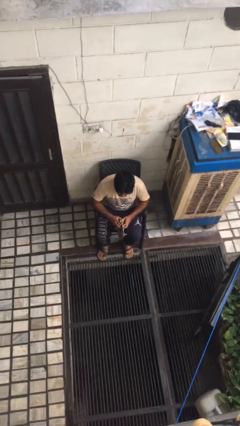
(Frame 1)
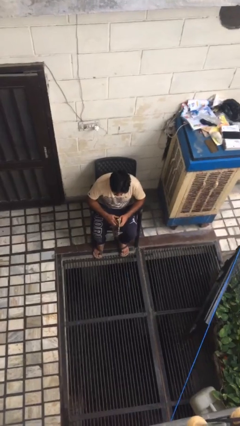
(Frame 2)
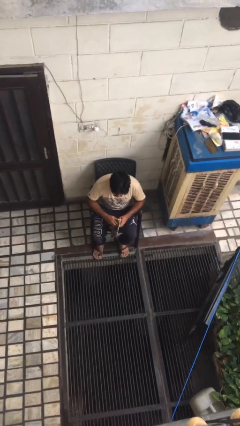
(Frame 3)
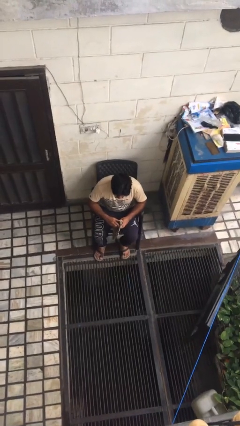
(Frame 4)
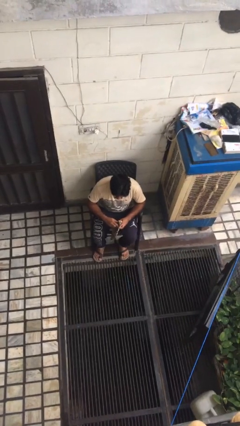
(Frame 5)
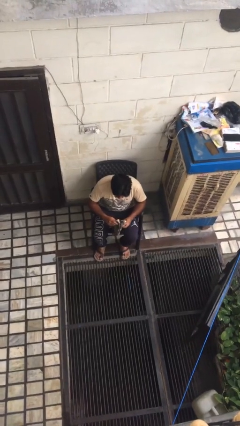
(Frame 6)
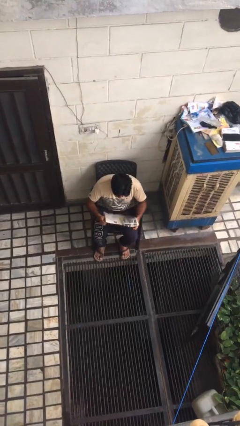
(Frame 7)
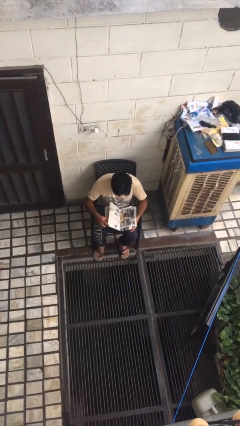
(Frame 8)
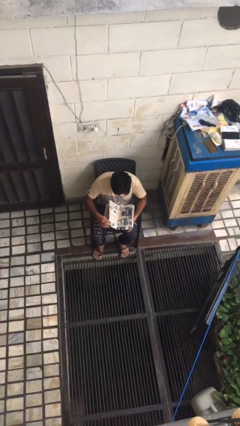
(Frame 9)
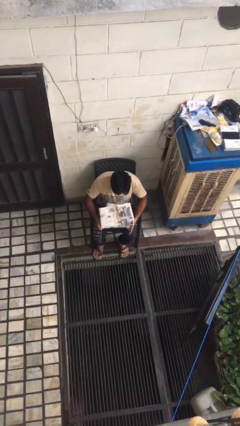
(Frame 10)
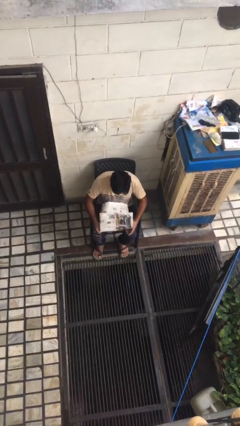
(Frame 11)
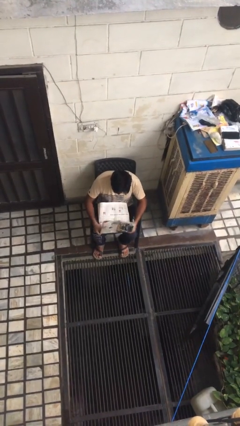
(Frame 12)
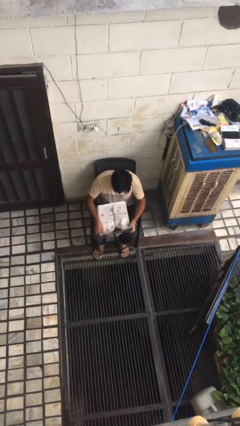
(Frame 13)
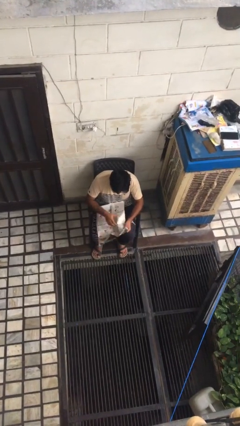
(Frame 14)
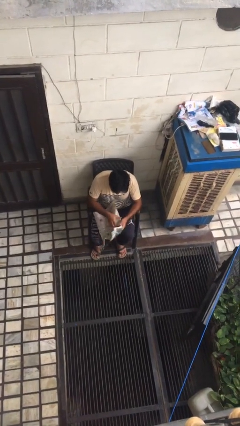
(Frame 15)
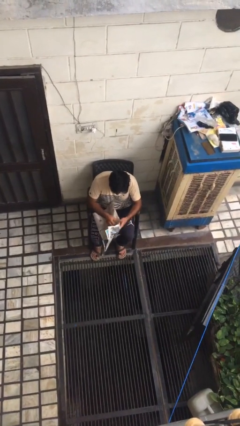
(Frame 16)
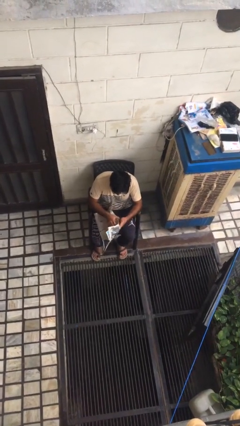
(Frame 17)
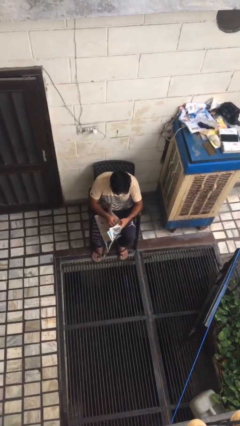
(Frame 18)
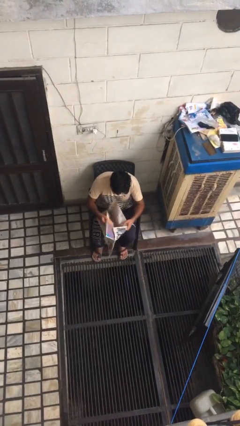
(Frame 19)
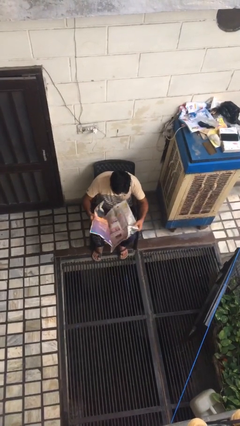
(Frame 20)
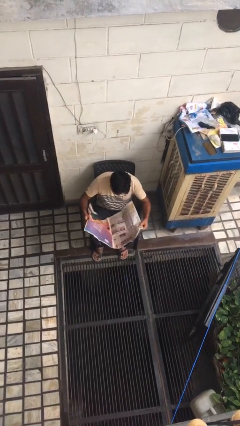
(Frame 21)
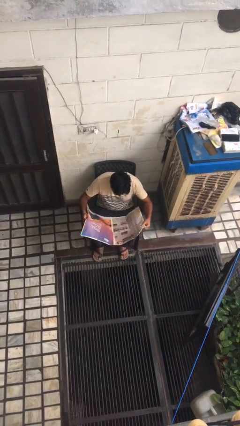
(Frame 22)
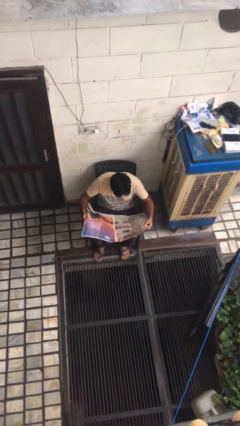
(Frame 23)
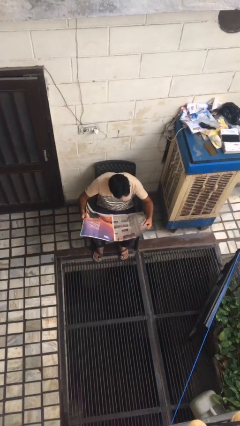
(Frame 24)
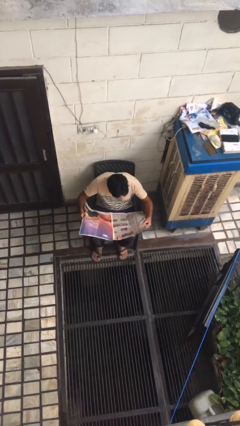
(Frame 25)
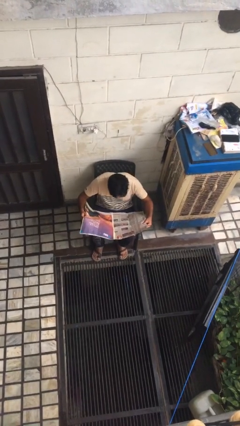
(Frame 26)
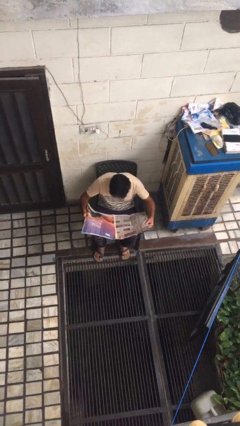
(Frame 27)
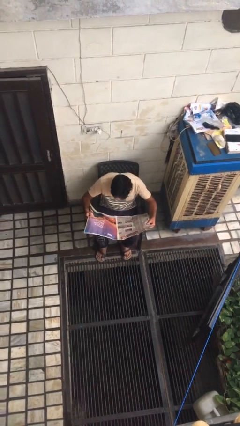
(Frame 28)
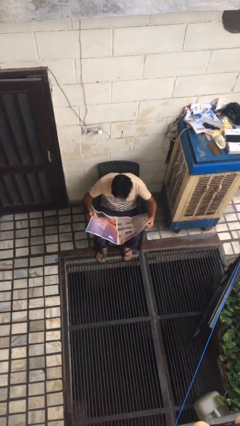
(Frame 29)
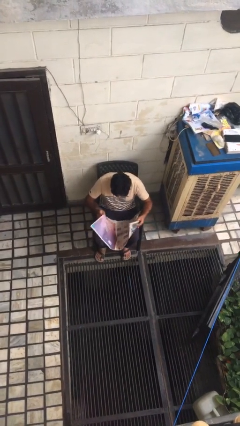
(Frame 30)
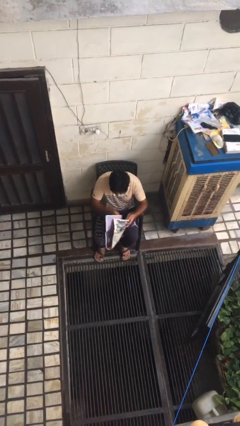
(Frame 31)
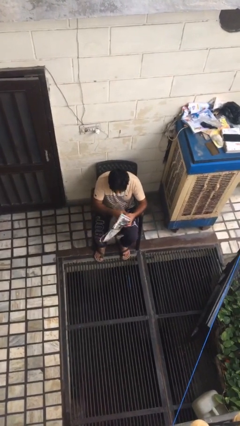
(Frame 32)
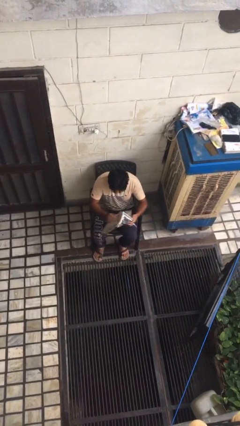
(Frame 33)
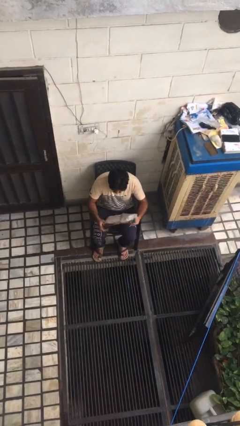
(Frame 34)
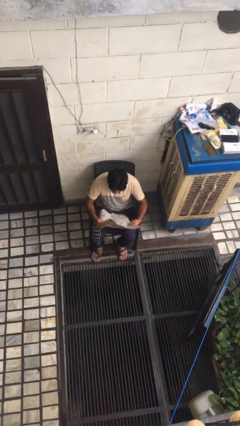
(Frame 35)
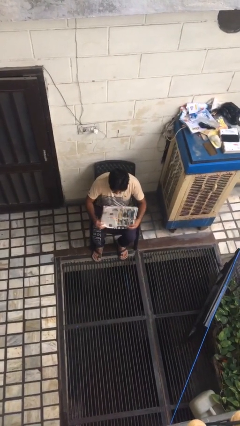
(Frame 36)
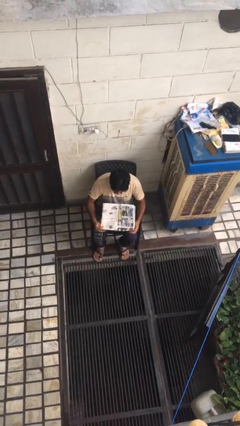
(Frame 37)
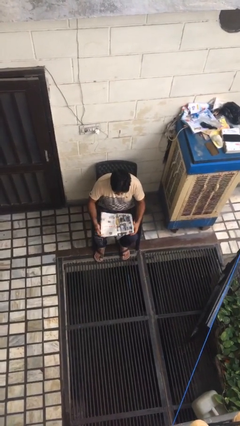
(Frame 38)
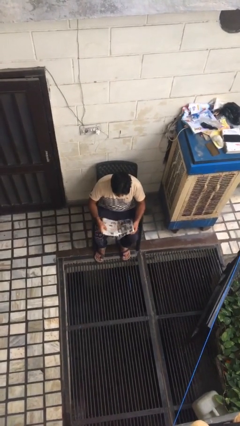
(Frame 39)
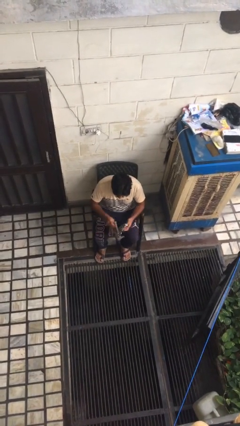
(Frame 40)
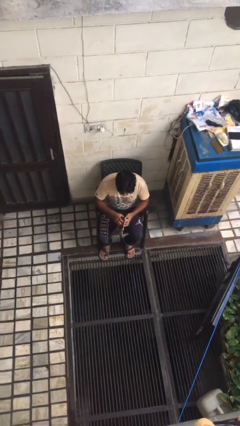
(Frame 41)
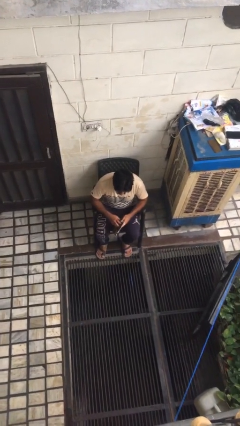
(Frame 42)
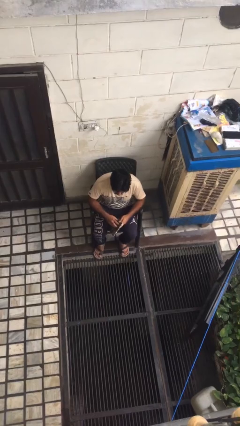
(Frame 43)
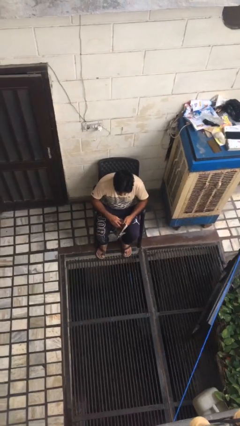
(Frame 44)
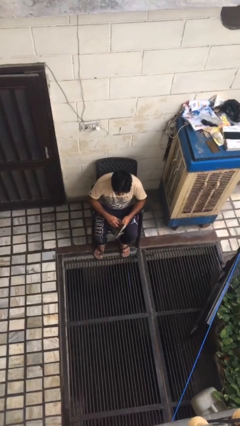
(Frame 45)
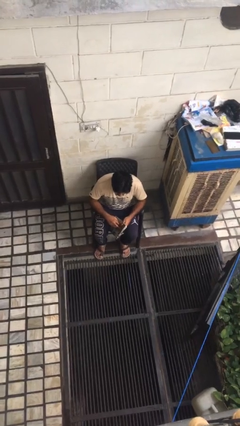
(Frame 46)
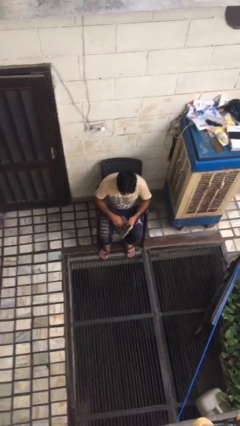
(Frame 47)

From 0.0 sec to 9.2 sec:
person reads newspaper

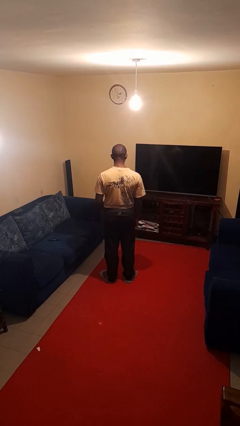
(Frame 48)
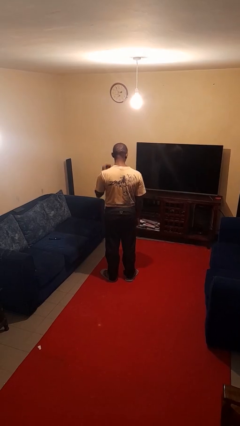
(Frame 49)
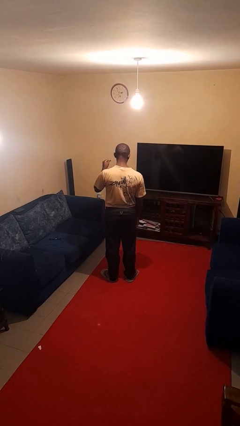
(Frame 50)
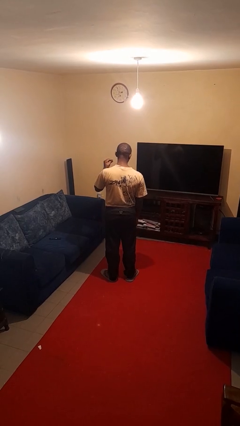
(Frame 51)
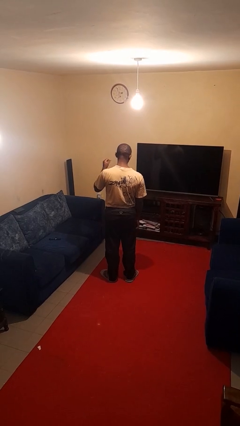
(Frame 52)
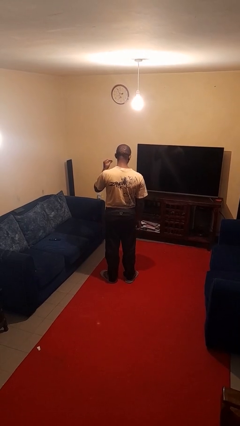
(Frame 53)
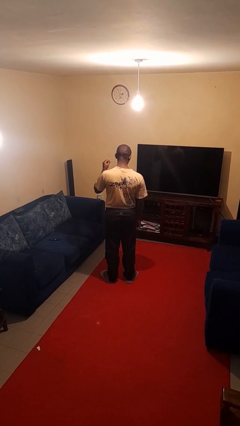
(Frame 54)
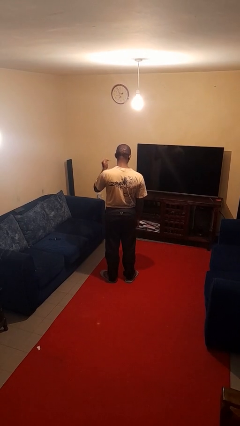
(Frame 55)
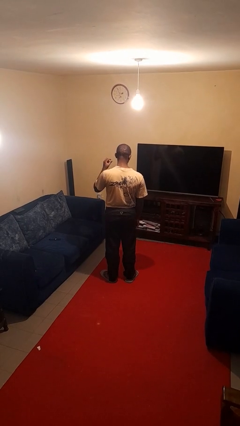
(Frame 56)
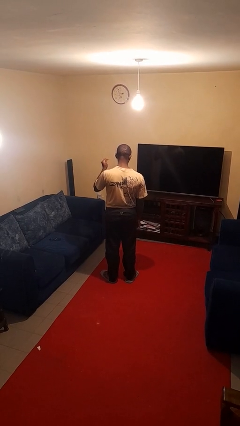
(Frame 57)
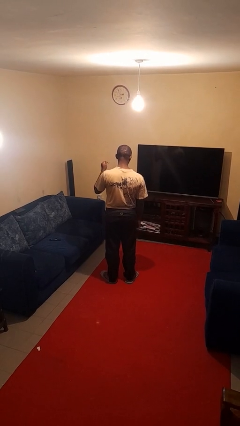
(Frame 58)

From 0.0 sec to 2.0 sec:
person snaps fingers

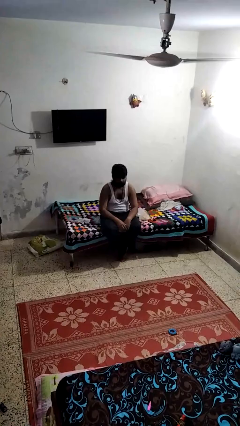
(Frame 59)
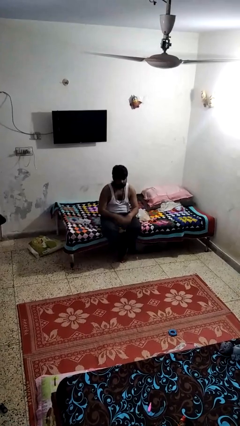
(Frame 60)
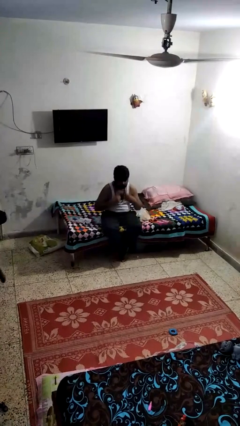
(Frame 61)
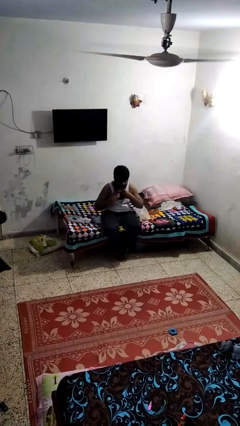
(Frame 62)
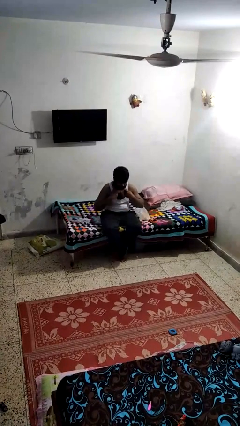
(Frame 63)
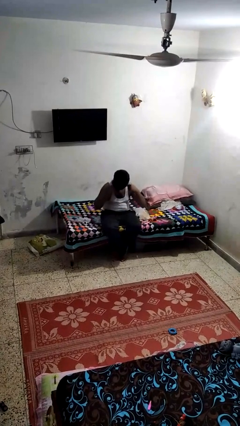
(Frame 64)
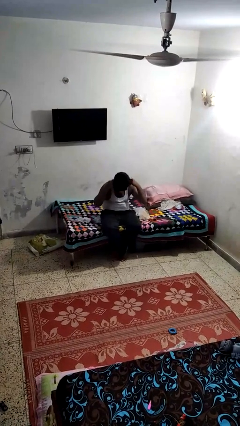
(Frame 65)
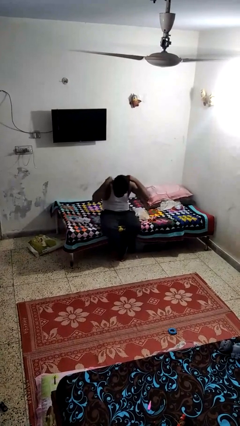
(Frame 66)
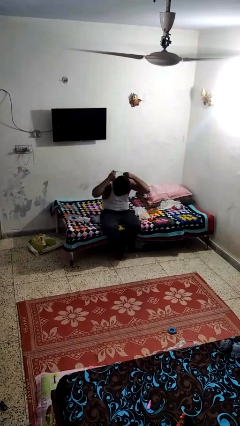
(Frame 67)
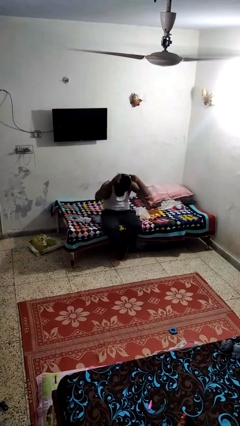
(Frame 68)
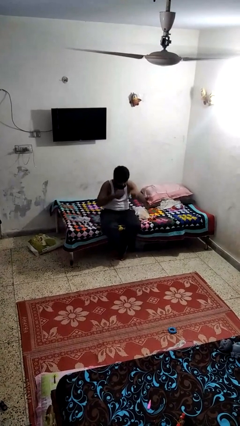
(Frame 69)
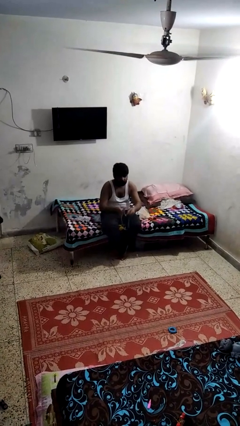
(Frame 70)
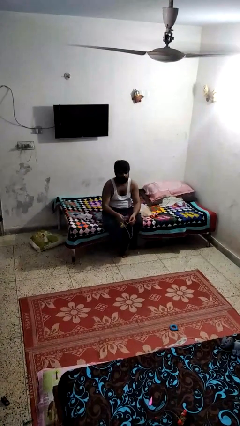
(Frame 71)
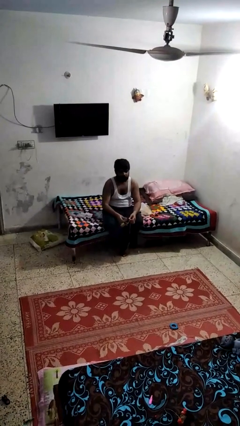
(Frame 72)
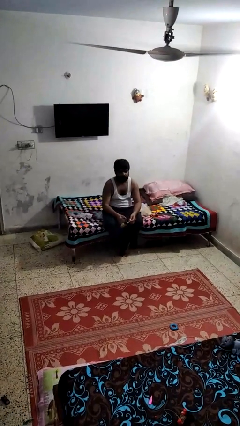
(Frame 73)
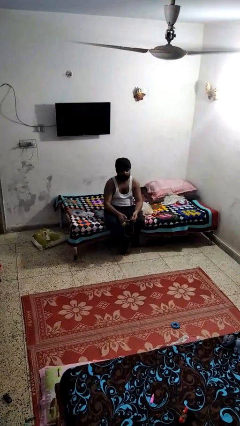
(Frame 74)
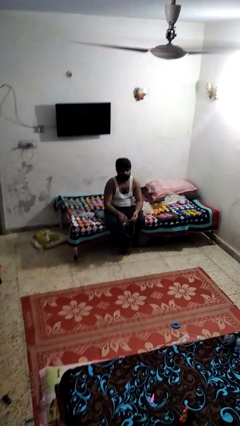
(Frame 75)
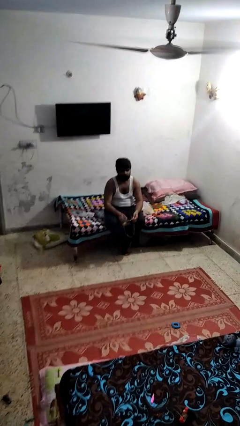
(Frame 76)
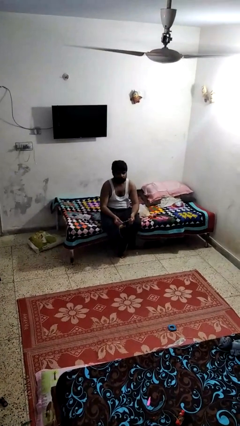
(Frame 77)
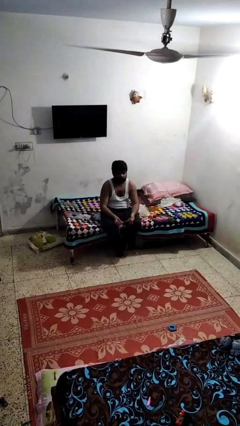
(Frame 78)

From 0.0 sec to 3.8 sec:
person takes off necklace

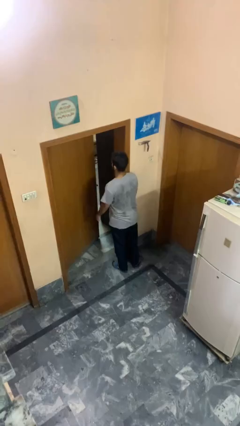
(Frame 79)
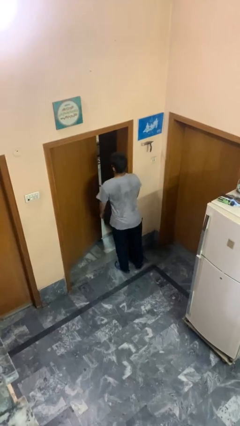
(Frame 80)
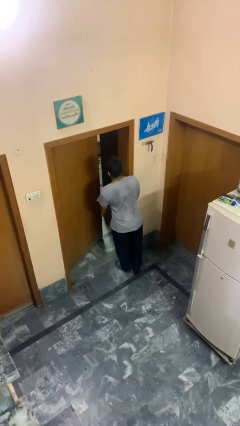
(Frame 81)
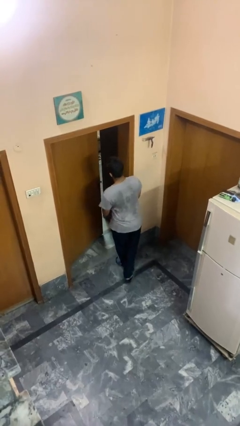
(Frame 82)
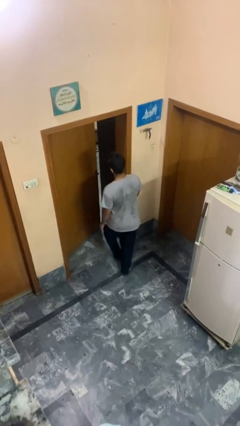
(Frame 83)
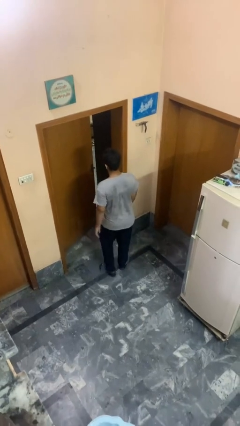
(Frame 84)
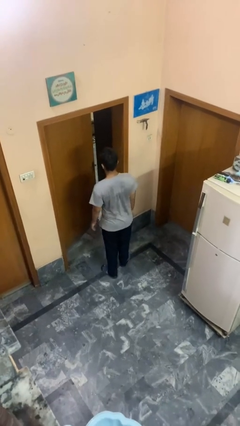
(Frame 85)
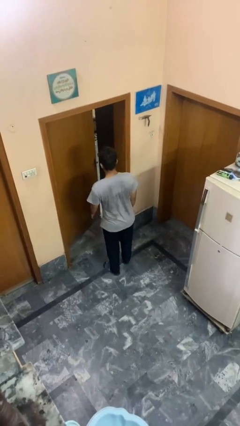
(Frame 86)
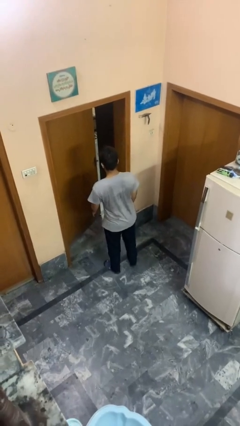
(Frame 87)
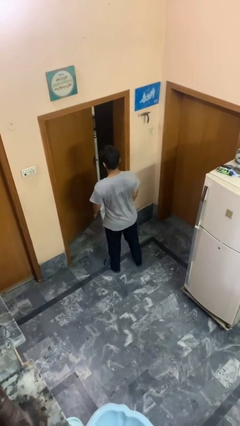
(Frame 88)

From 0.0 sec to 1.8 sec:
person bumps into wall

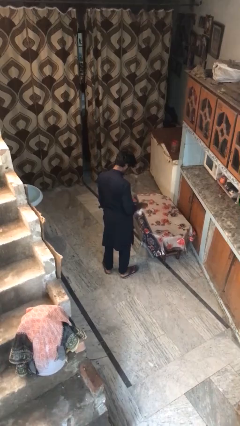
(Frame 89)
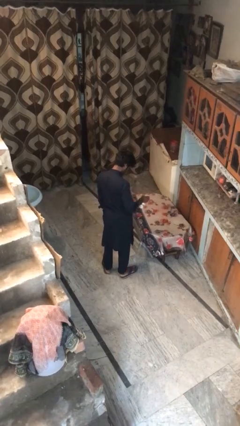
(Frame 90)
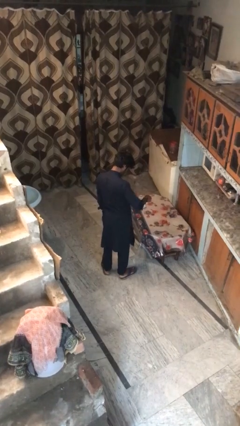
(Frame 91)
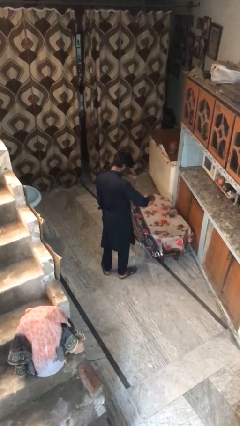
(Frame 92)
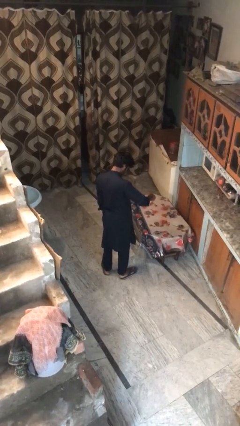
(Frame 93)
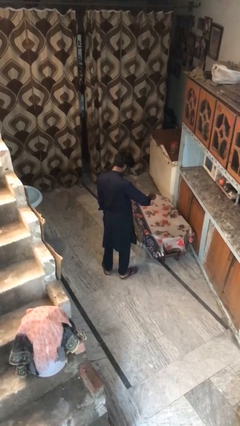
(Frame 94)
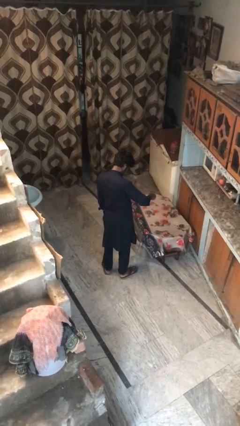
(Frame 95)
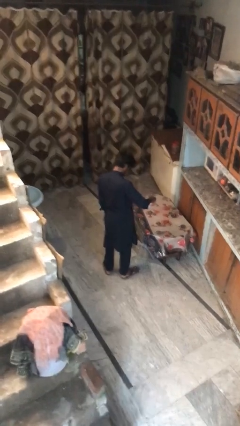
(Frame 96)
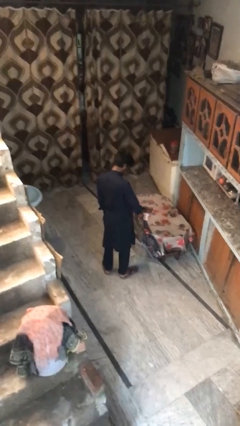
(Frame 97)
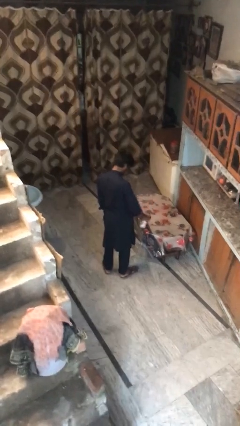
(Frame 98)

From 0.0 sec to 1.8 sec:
person sprays from bottle
